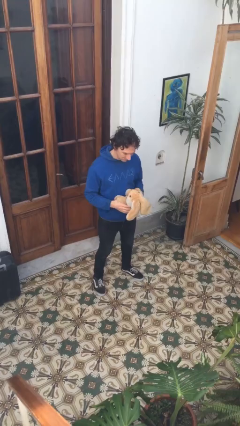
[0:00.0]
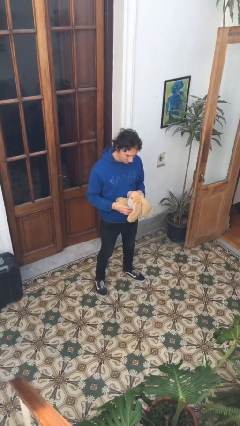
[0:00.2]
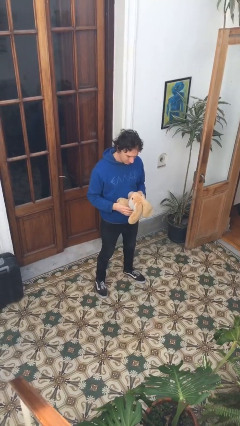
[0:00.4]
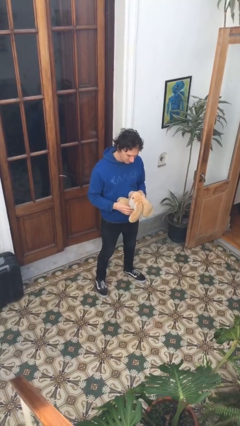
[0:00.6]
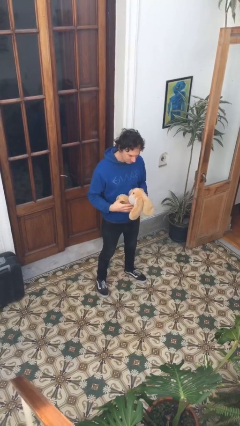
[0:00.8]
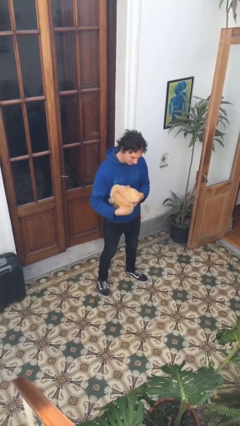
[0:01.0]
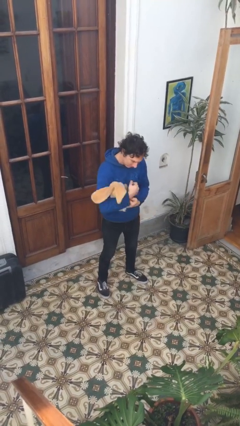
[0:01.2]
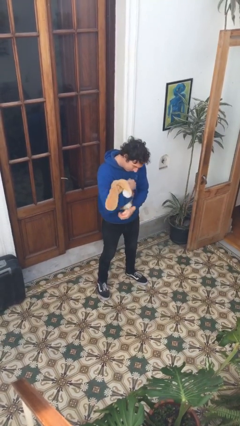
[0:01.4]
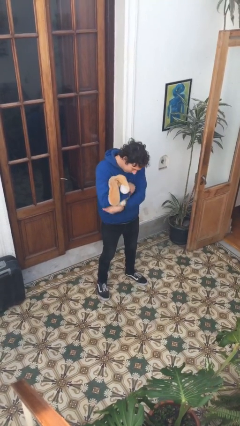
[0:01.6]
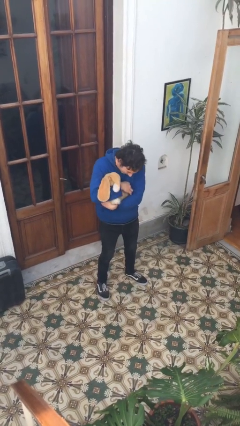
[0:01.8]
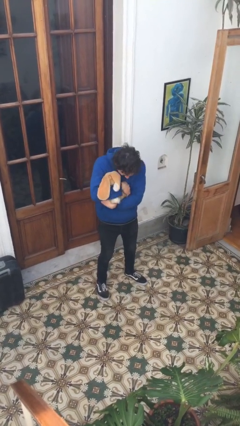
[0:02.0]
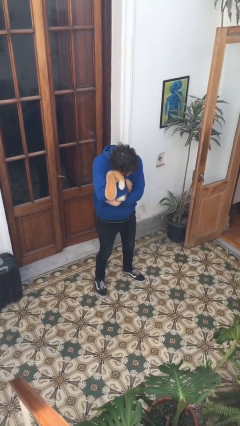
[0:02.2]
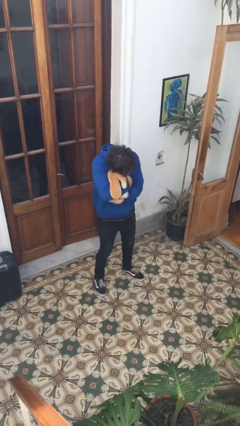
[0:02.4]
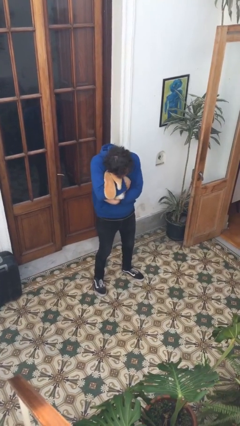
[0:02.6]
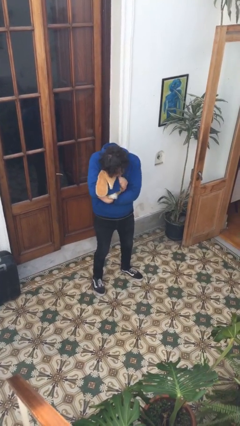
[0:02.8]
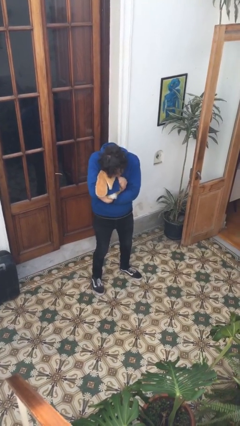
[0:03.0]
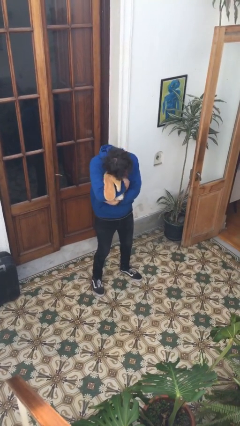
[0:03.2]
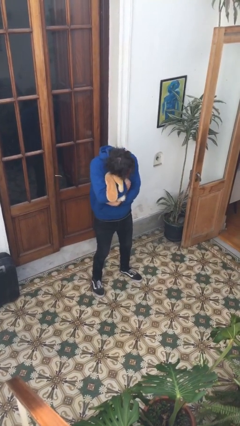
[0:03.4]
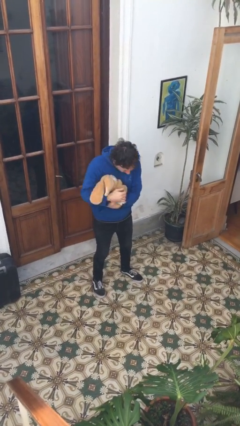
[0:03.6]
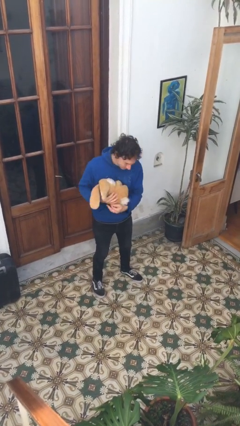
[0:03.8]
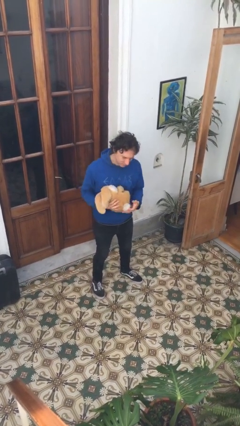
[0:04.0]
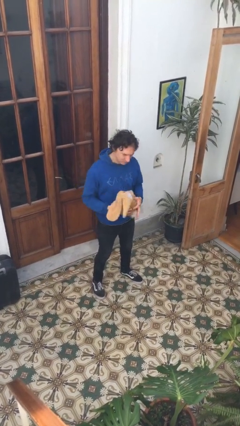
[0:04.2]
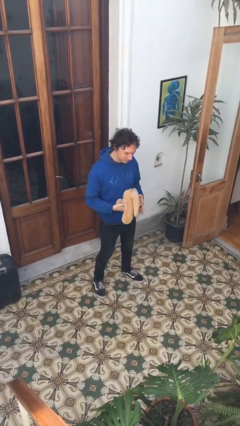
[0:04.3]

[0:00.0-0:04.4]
person hugs stuffed animal

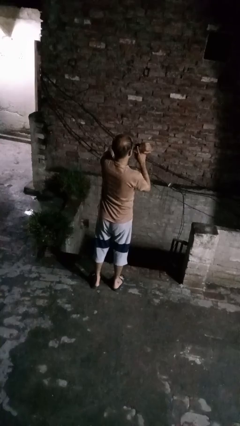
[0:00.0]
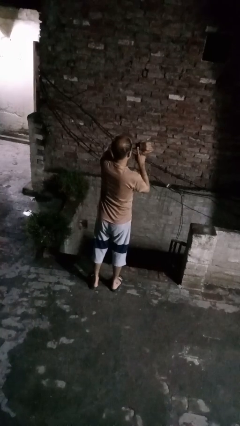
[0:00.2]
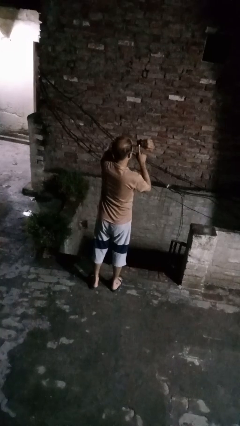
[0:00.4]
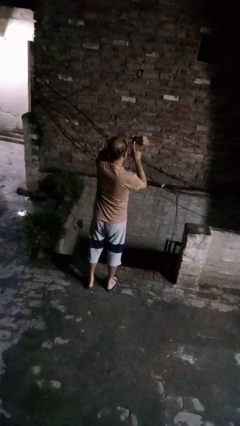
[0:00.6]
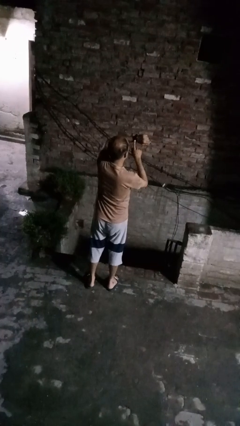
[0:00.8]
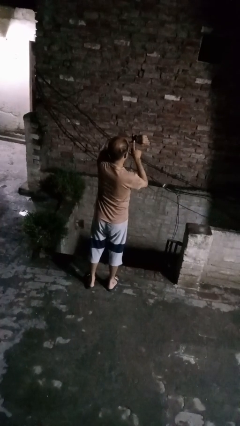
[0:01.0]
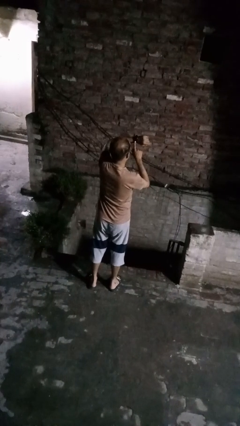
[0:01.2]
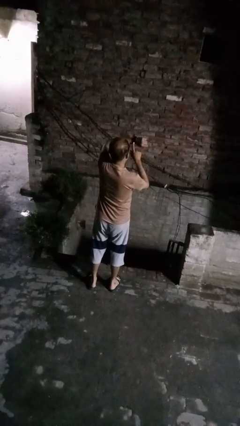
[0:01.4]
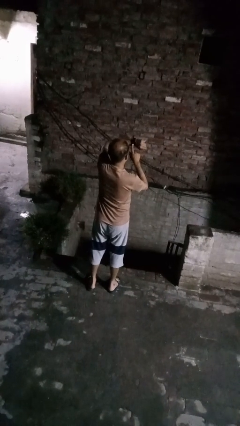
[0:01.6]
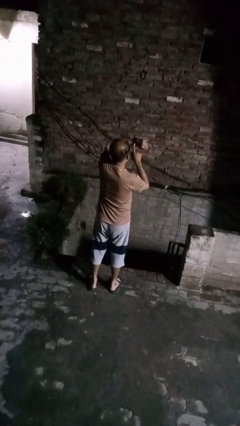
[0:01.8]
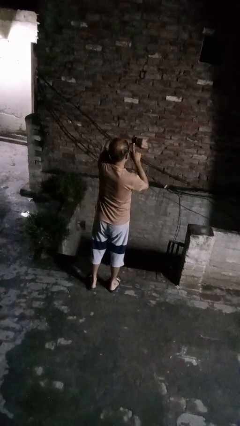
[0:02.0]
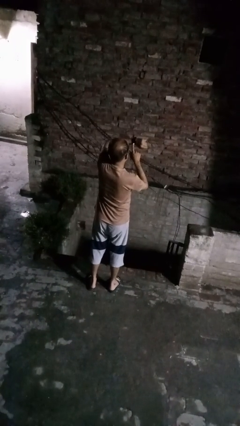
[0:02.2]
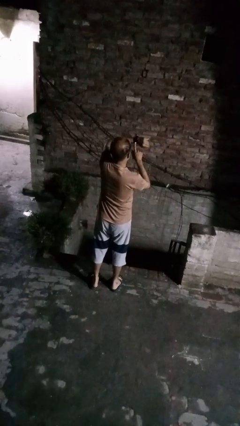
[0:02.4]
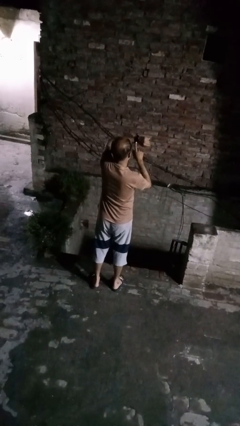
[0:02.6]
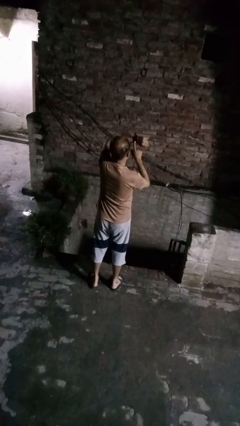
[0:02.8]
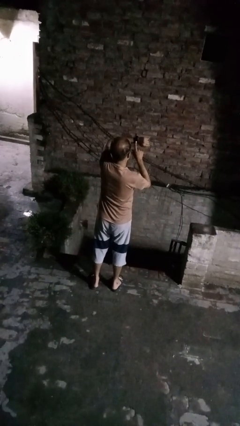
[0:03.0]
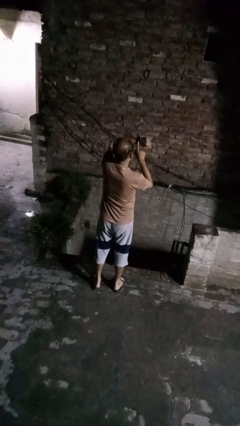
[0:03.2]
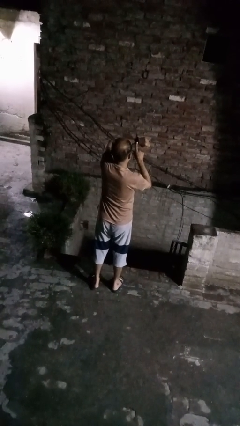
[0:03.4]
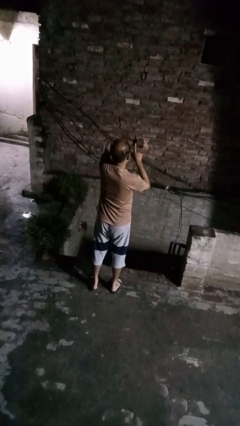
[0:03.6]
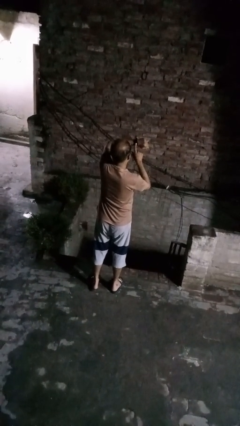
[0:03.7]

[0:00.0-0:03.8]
person gestures watch closely

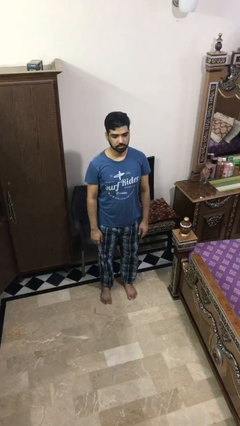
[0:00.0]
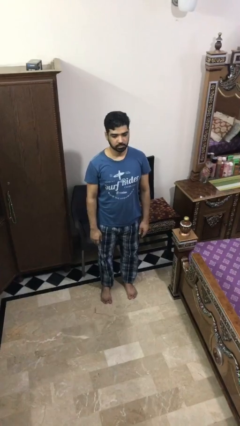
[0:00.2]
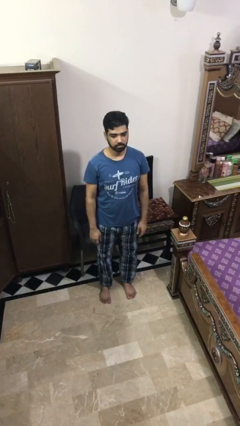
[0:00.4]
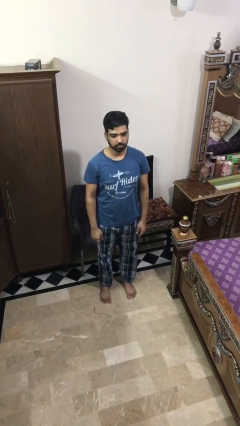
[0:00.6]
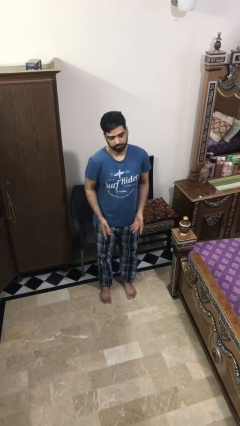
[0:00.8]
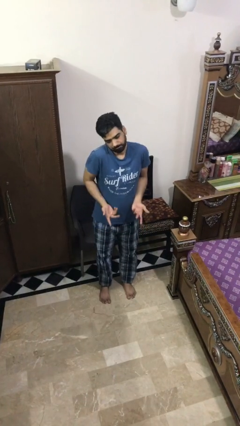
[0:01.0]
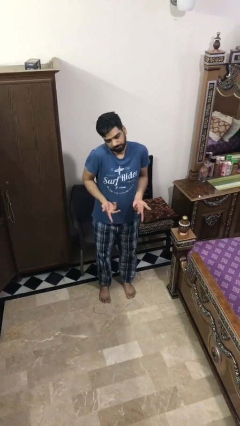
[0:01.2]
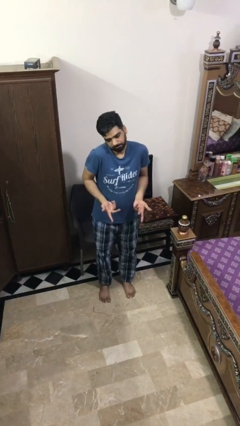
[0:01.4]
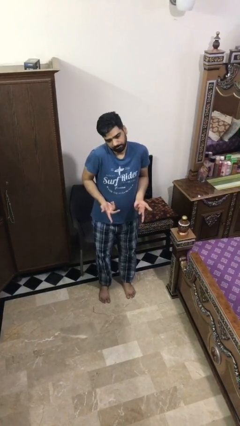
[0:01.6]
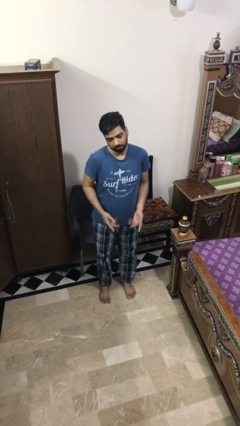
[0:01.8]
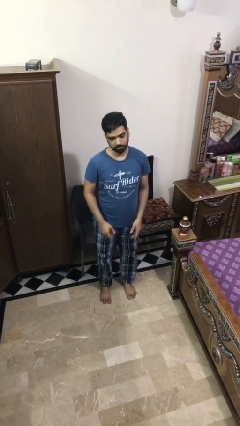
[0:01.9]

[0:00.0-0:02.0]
person shrugs

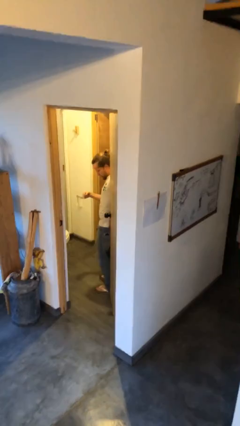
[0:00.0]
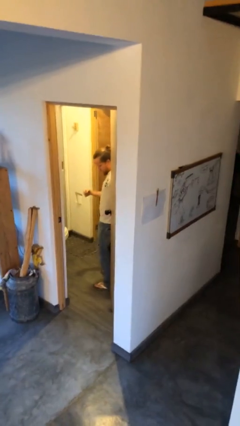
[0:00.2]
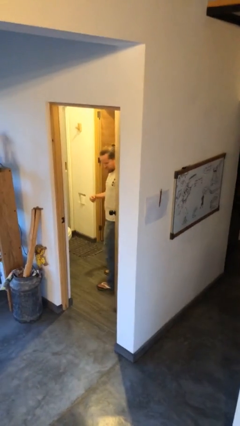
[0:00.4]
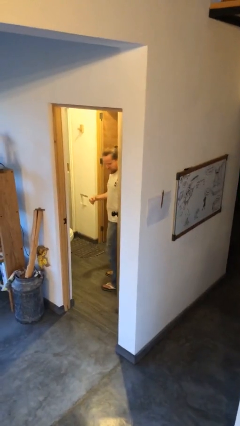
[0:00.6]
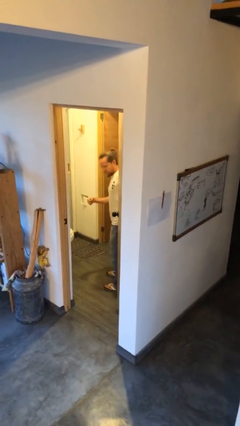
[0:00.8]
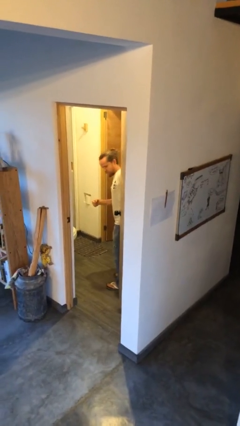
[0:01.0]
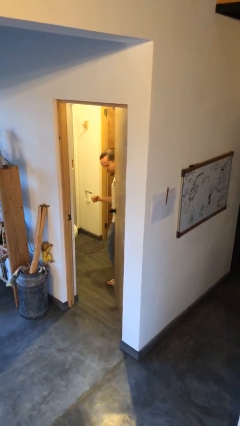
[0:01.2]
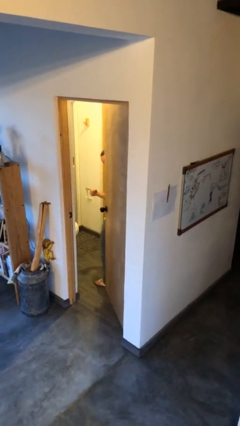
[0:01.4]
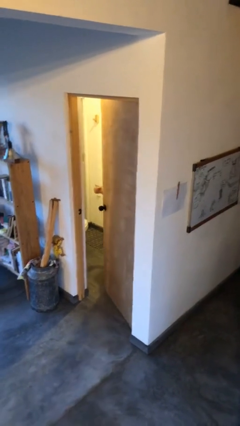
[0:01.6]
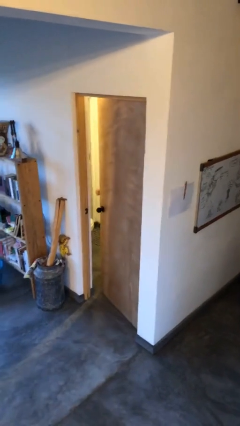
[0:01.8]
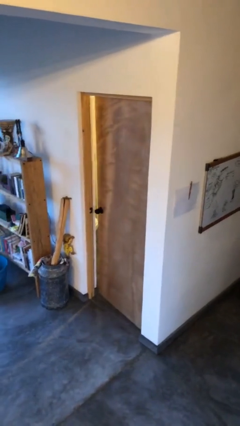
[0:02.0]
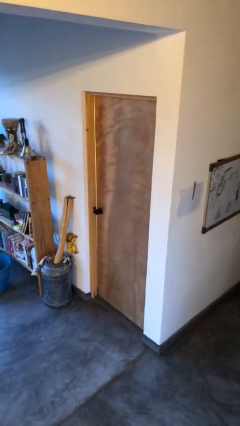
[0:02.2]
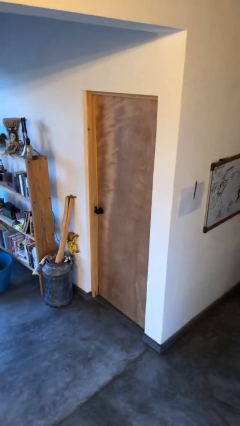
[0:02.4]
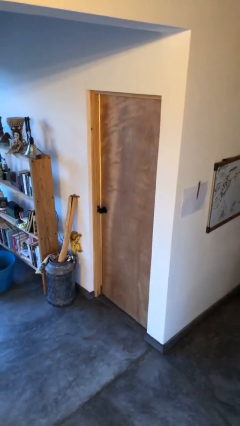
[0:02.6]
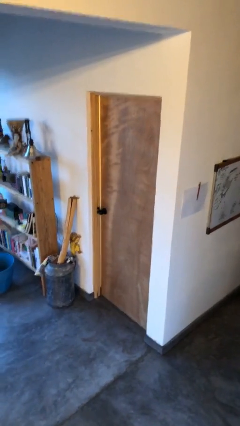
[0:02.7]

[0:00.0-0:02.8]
person closes door with hip

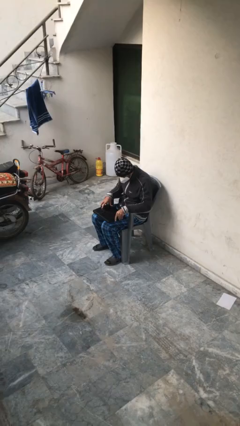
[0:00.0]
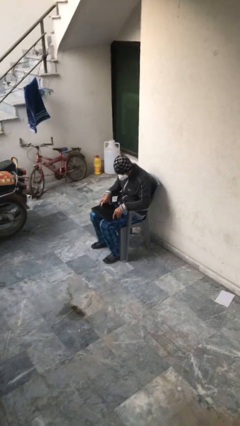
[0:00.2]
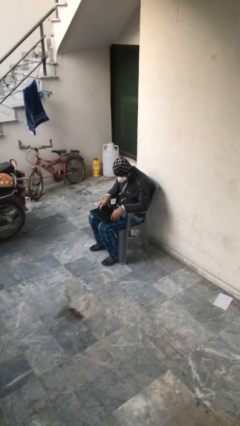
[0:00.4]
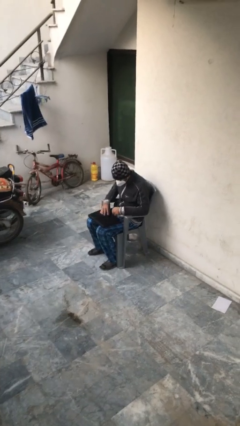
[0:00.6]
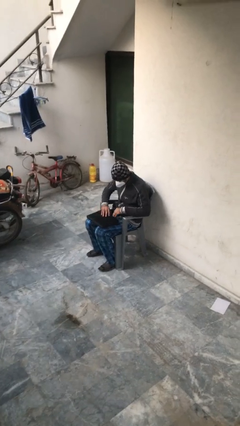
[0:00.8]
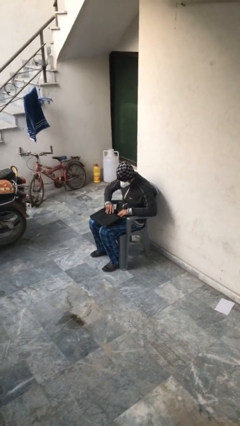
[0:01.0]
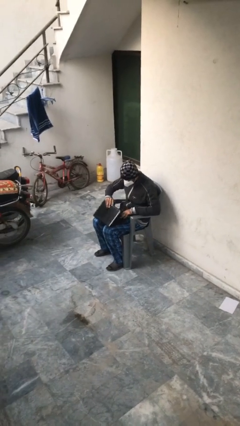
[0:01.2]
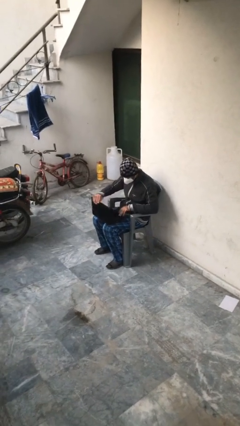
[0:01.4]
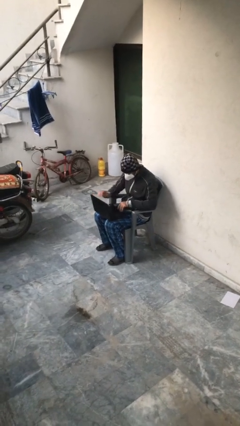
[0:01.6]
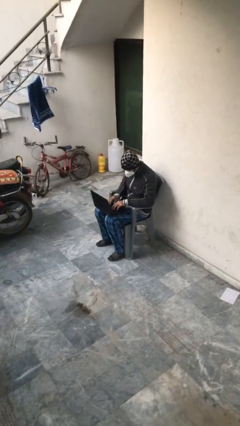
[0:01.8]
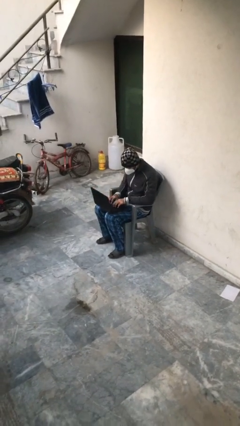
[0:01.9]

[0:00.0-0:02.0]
person interacts with laptop

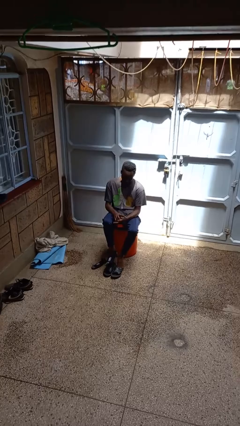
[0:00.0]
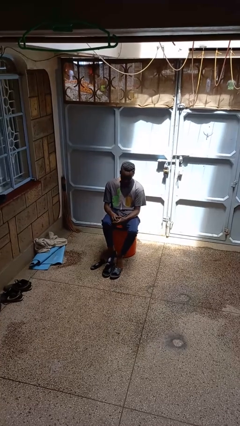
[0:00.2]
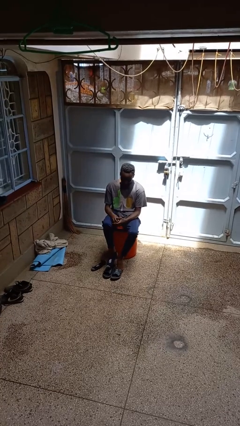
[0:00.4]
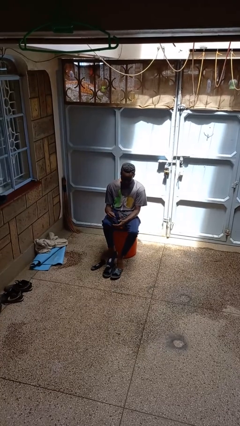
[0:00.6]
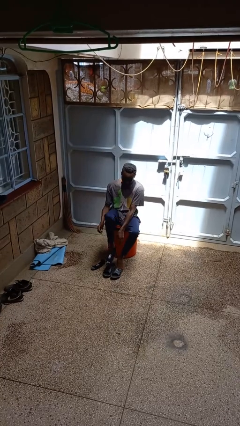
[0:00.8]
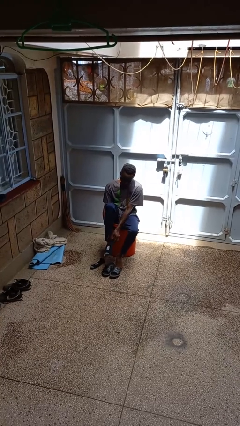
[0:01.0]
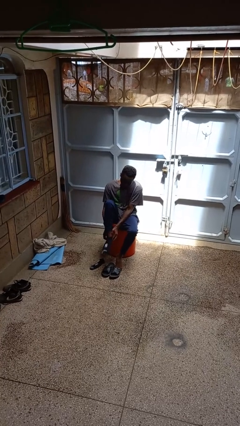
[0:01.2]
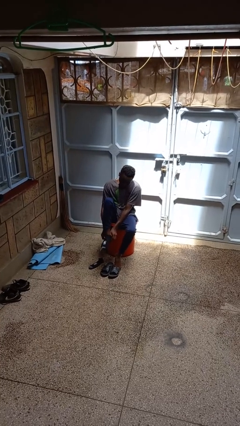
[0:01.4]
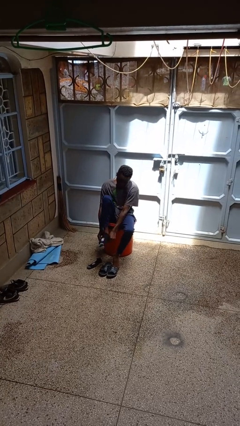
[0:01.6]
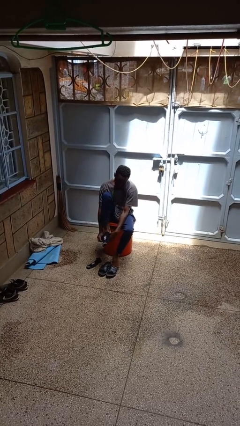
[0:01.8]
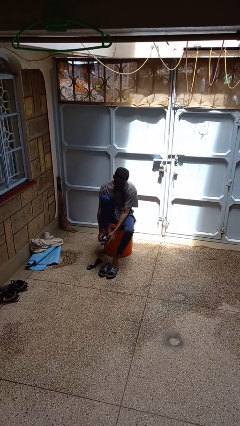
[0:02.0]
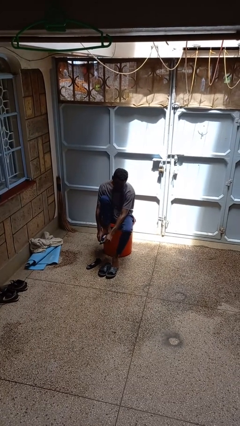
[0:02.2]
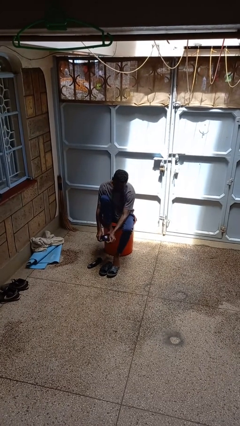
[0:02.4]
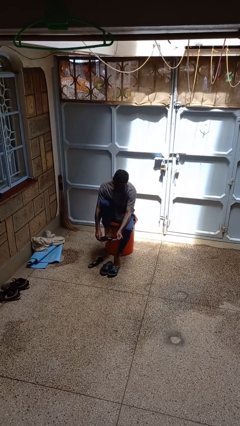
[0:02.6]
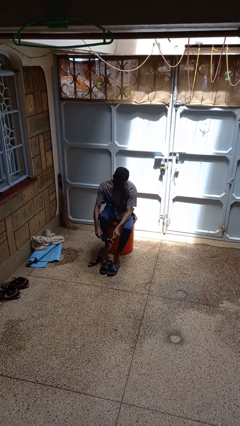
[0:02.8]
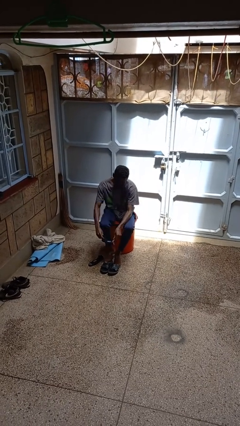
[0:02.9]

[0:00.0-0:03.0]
person takes off socks
